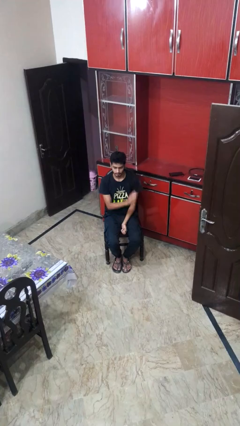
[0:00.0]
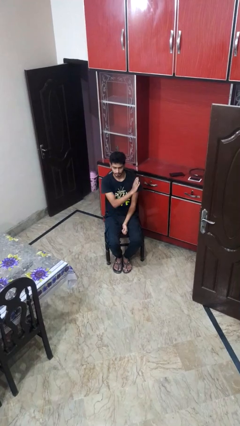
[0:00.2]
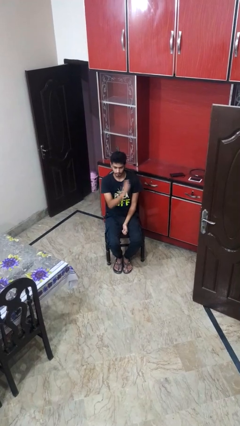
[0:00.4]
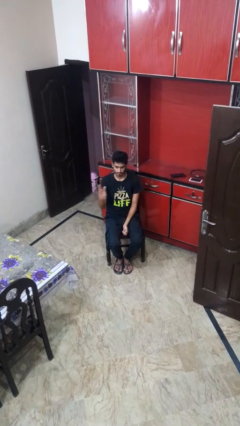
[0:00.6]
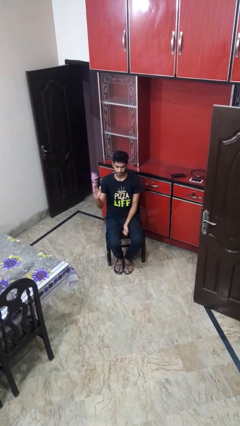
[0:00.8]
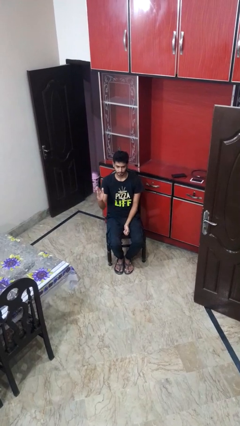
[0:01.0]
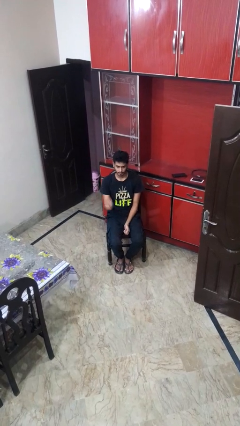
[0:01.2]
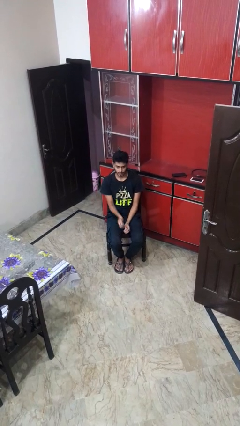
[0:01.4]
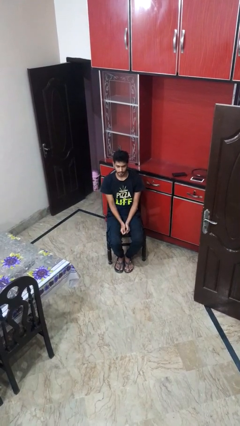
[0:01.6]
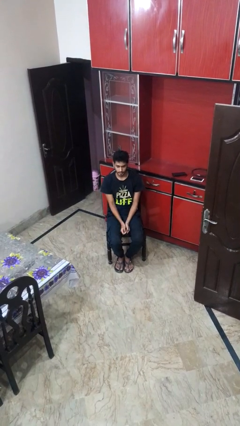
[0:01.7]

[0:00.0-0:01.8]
person gestures swipe right

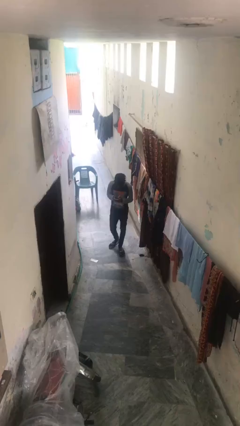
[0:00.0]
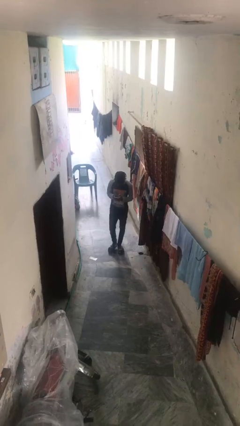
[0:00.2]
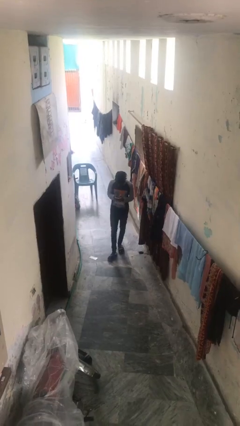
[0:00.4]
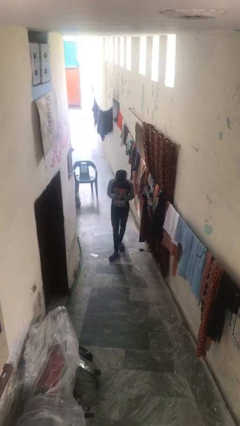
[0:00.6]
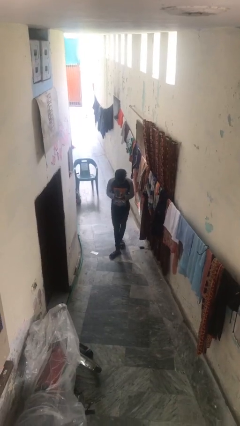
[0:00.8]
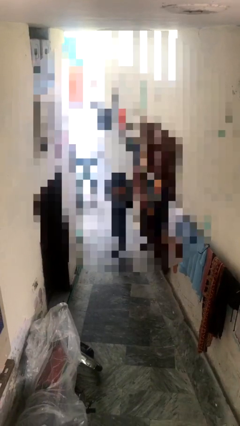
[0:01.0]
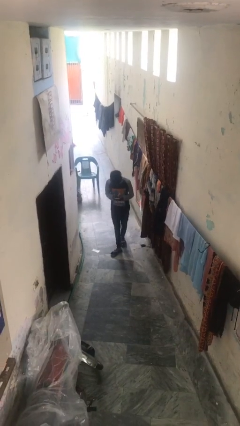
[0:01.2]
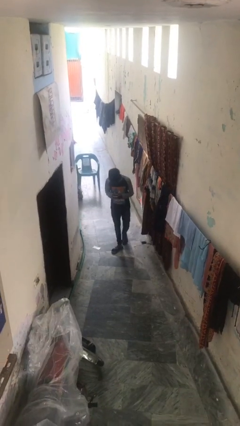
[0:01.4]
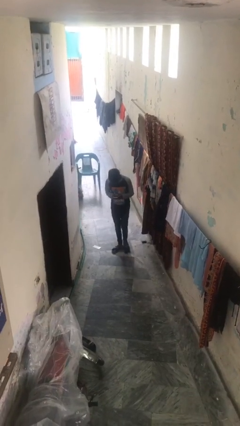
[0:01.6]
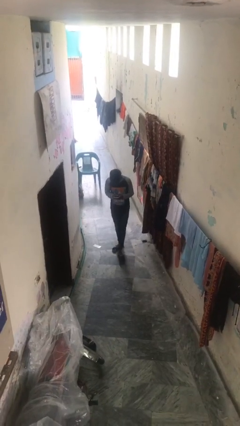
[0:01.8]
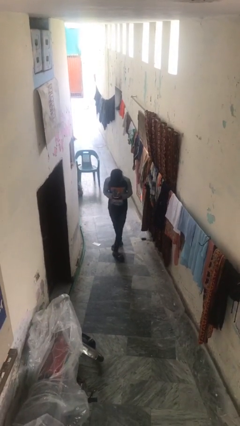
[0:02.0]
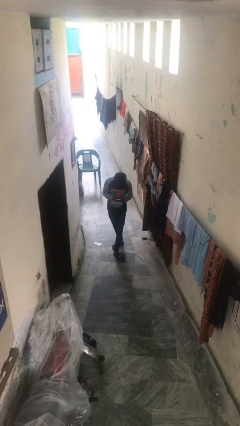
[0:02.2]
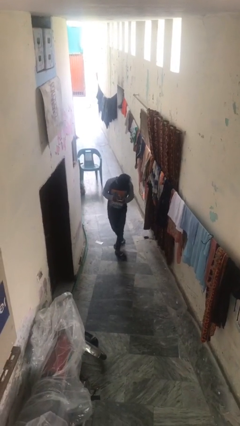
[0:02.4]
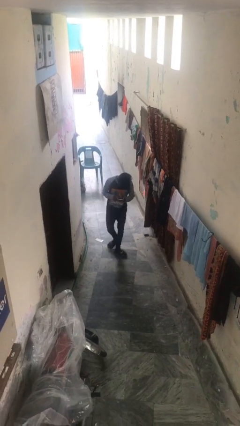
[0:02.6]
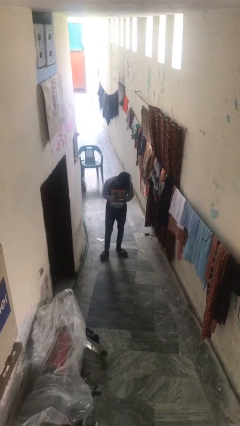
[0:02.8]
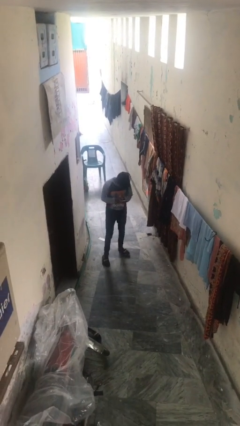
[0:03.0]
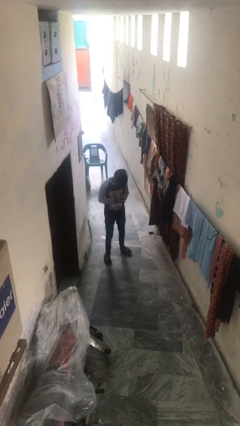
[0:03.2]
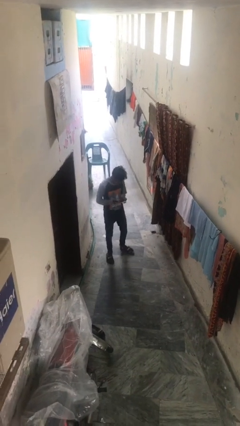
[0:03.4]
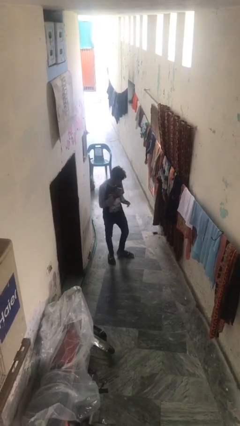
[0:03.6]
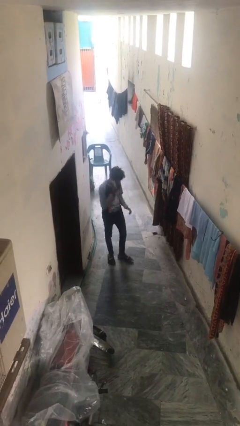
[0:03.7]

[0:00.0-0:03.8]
person texts on phone

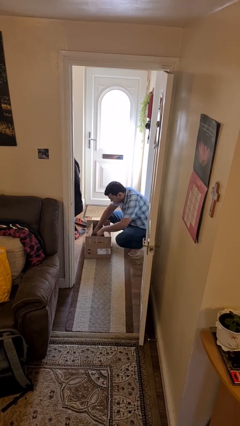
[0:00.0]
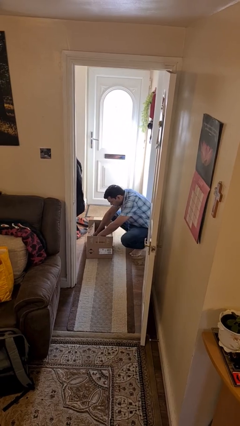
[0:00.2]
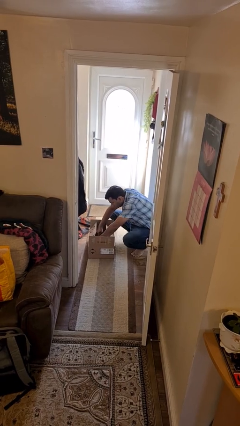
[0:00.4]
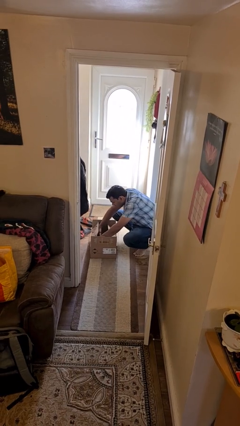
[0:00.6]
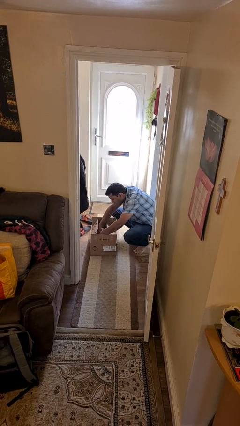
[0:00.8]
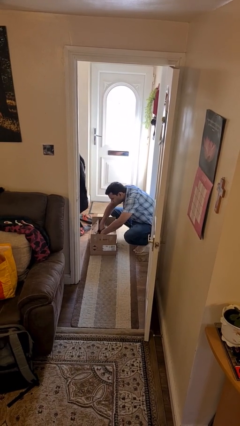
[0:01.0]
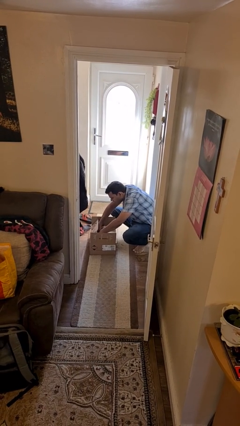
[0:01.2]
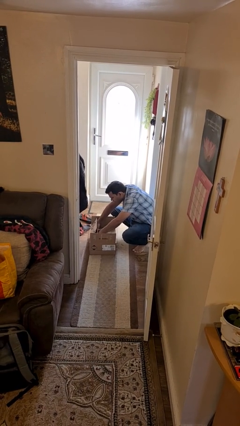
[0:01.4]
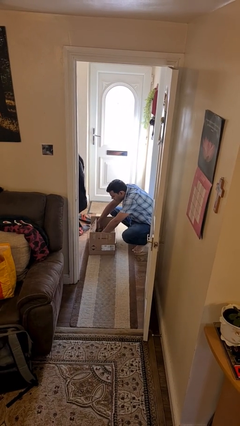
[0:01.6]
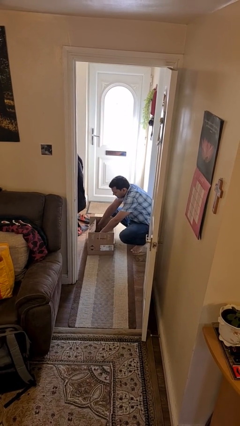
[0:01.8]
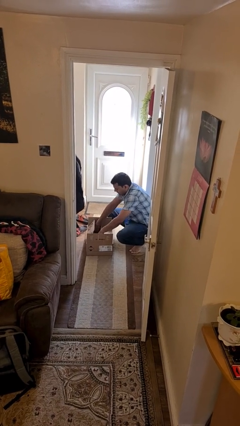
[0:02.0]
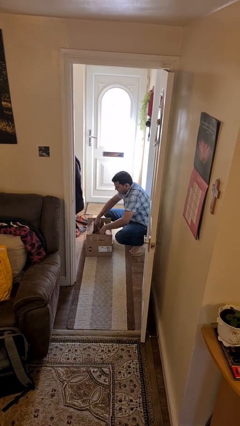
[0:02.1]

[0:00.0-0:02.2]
person searches in box

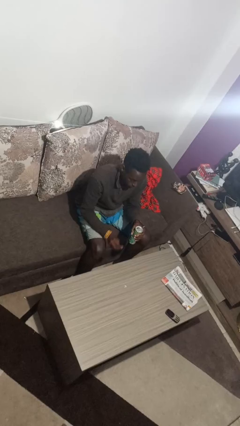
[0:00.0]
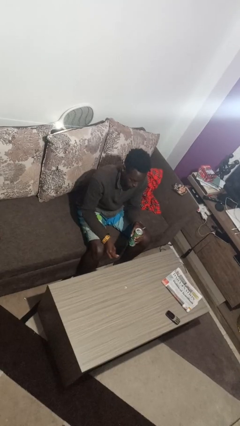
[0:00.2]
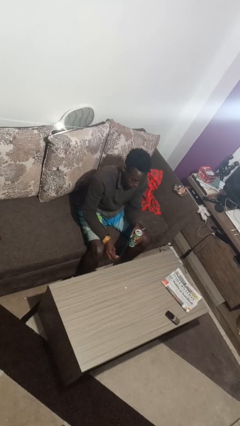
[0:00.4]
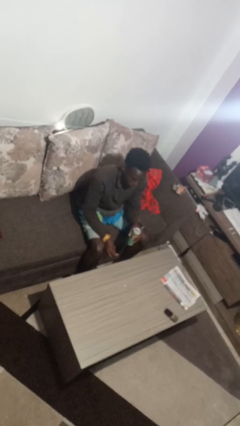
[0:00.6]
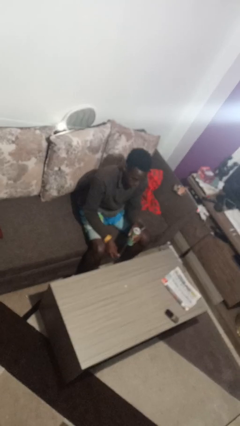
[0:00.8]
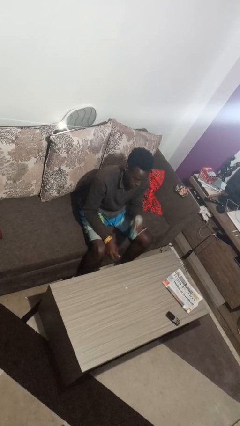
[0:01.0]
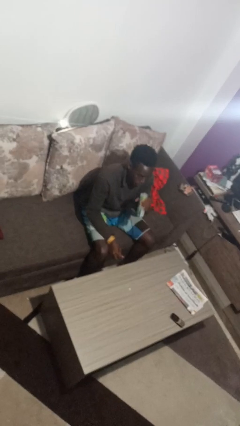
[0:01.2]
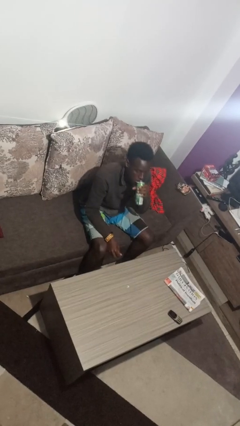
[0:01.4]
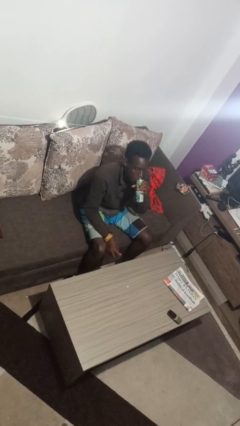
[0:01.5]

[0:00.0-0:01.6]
person opens beverage can

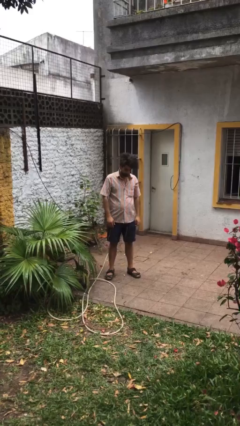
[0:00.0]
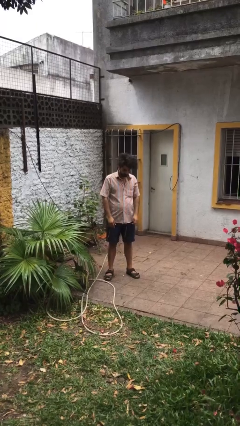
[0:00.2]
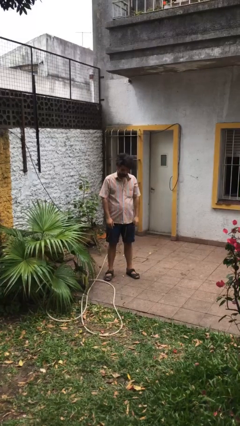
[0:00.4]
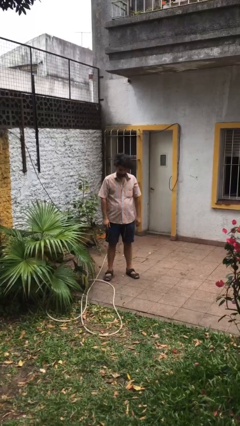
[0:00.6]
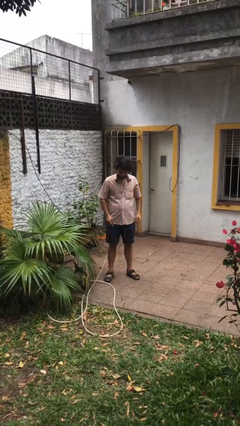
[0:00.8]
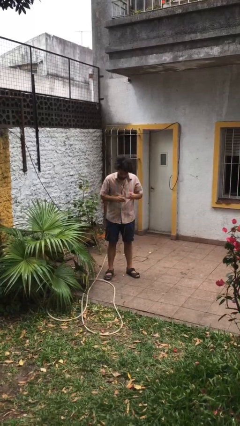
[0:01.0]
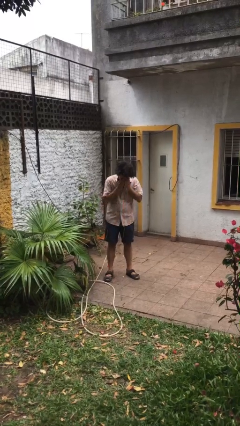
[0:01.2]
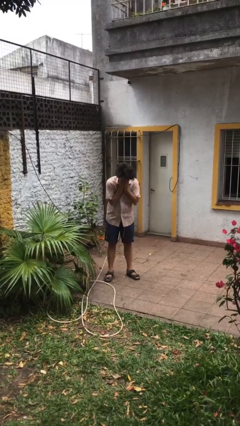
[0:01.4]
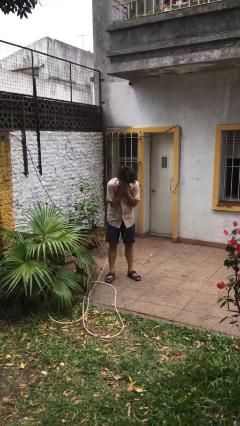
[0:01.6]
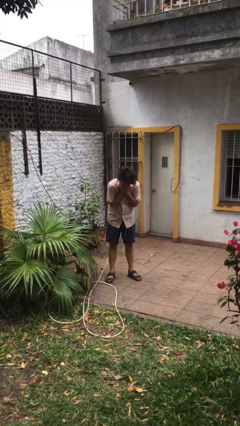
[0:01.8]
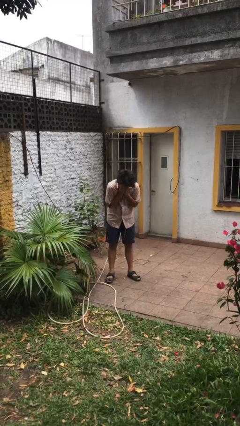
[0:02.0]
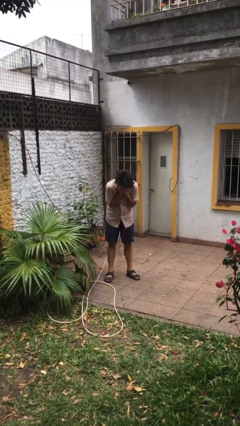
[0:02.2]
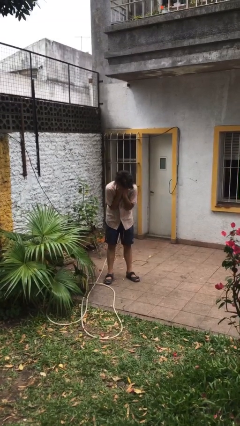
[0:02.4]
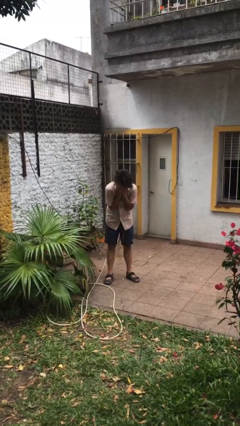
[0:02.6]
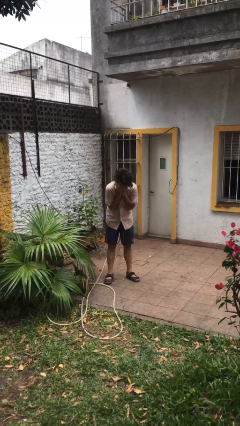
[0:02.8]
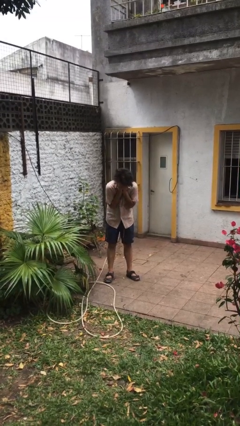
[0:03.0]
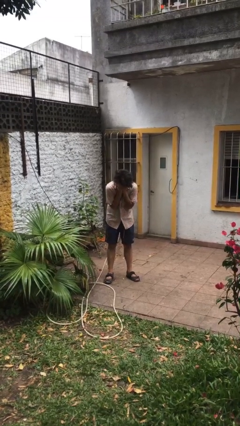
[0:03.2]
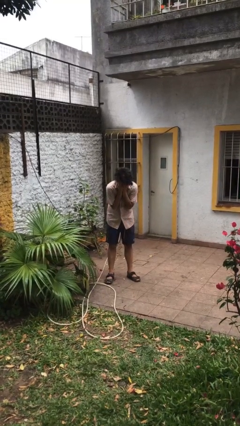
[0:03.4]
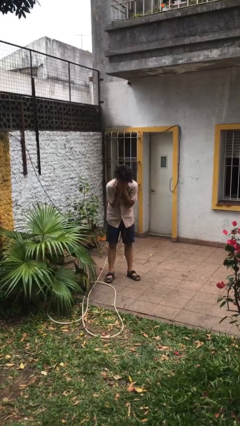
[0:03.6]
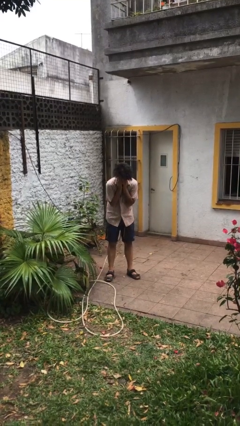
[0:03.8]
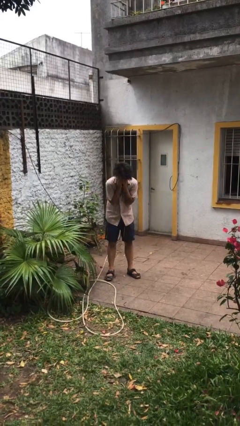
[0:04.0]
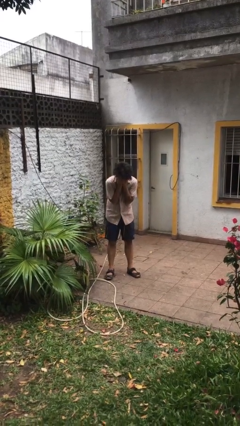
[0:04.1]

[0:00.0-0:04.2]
person rubs eyes

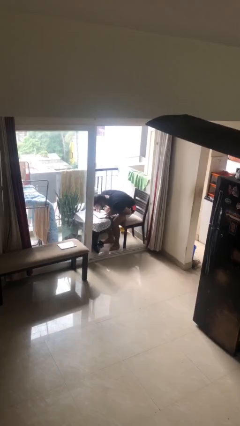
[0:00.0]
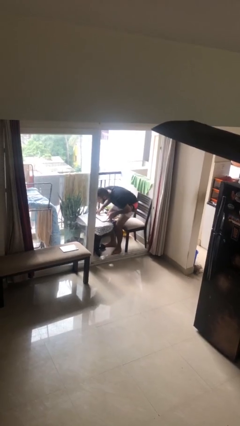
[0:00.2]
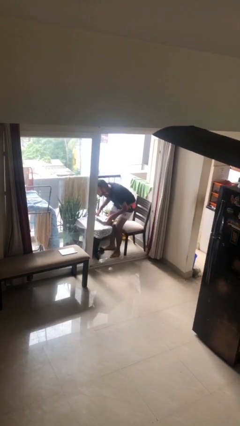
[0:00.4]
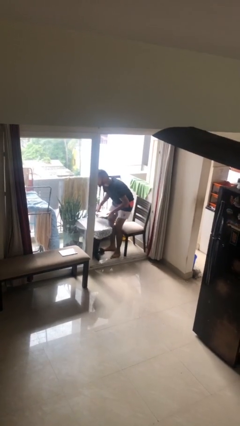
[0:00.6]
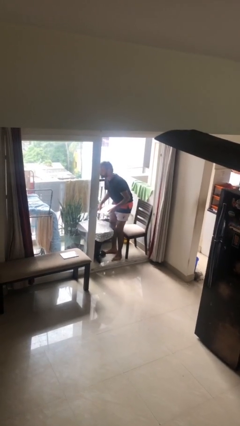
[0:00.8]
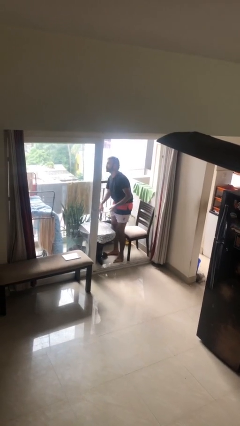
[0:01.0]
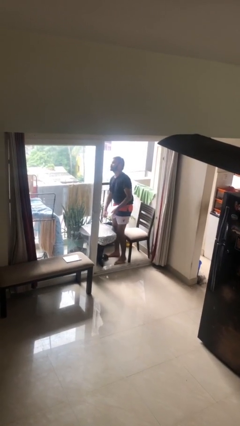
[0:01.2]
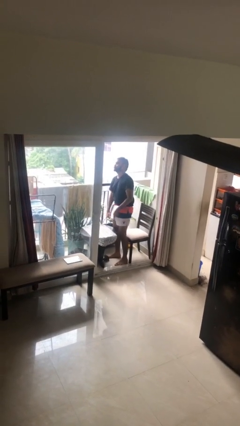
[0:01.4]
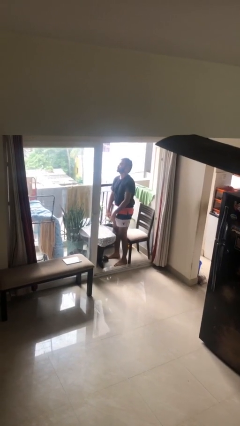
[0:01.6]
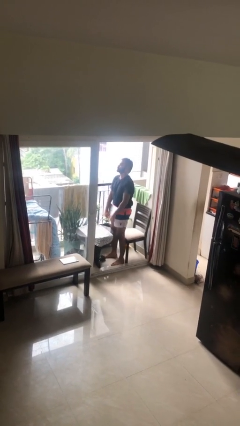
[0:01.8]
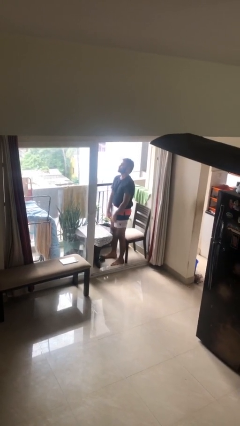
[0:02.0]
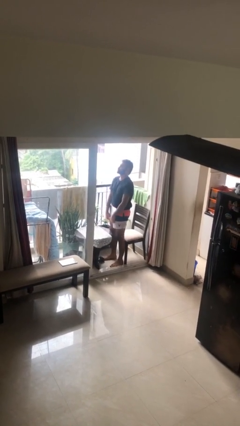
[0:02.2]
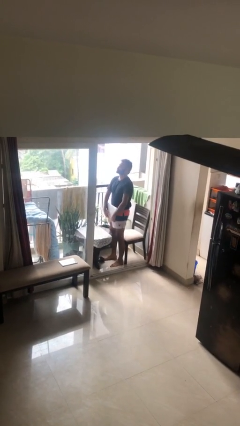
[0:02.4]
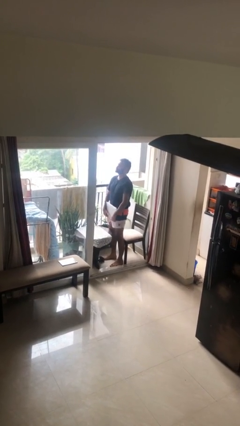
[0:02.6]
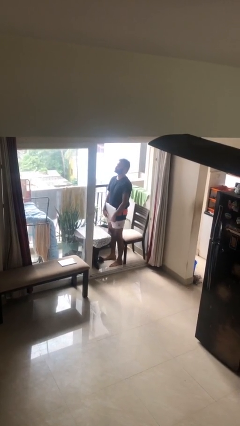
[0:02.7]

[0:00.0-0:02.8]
person stands up

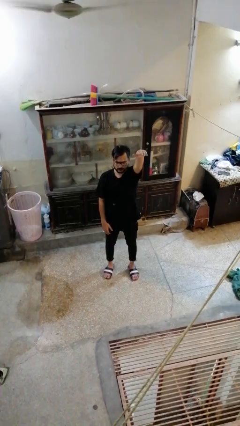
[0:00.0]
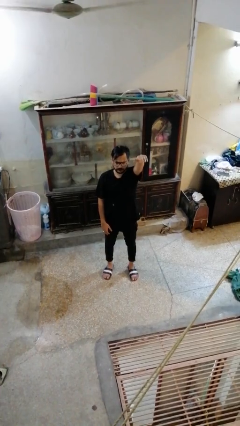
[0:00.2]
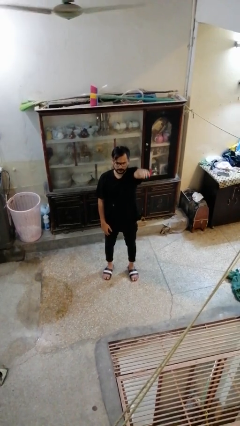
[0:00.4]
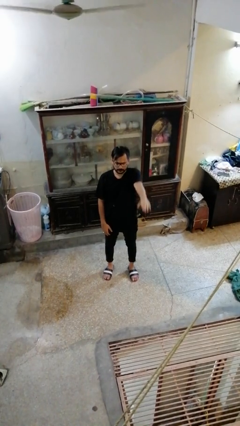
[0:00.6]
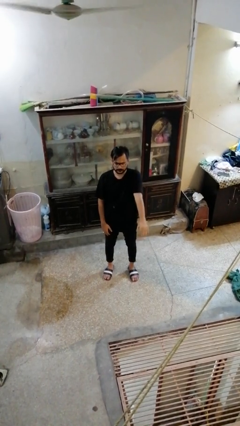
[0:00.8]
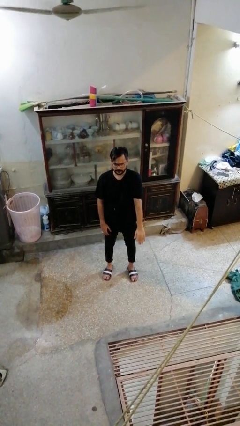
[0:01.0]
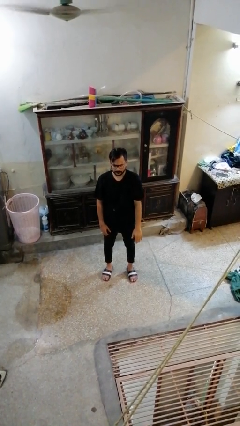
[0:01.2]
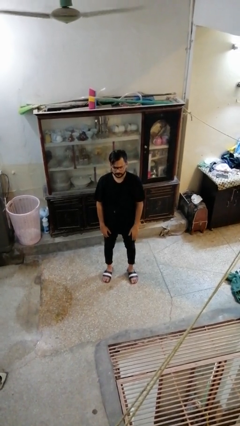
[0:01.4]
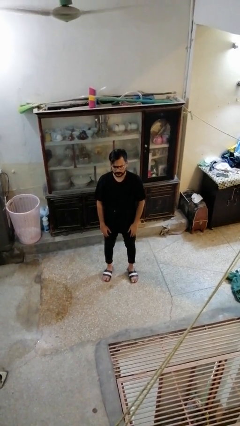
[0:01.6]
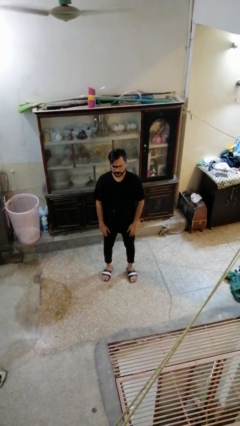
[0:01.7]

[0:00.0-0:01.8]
person gestures swipe down
